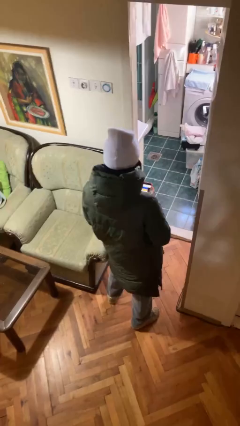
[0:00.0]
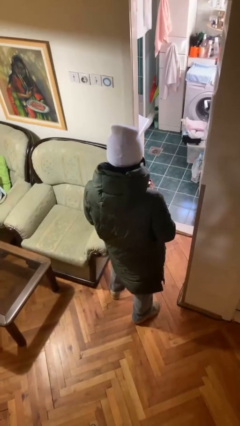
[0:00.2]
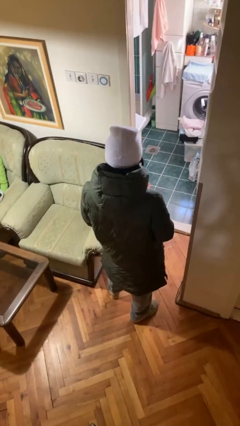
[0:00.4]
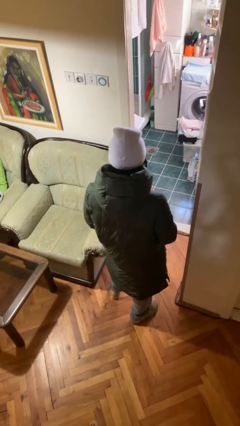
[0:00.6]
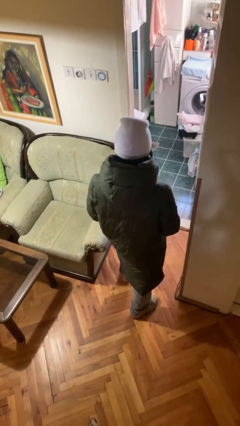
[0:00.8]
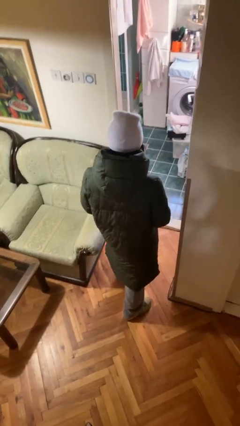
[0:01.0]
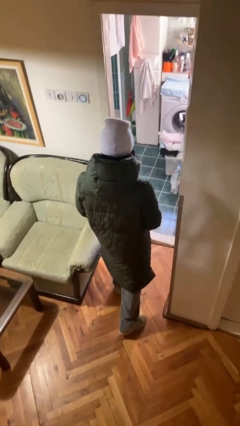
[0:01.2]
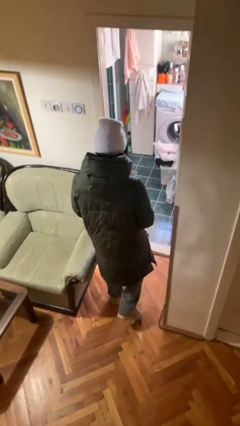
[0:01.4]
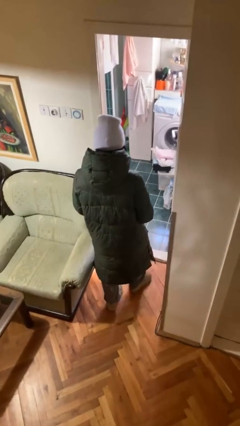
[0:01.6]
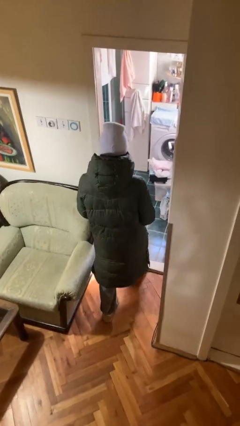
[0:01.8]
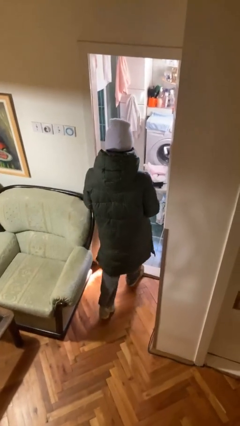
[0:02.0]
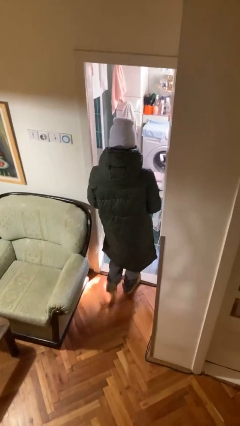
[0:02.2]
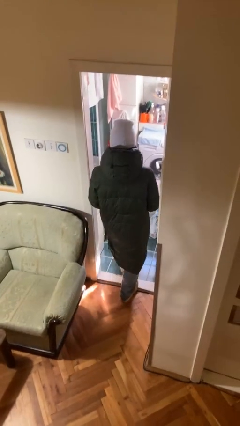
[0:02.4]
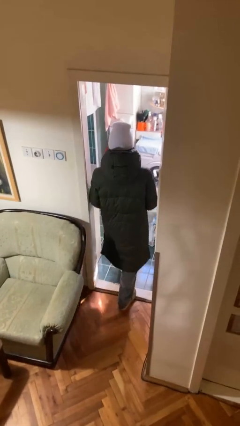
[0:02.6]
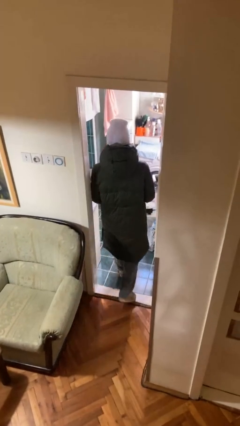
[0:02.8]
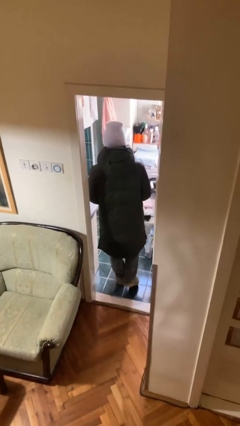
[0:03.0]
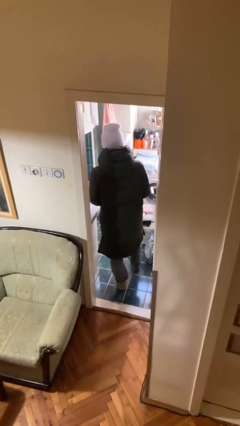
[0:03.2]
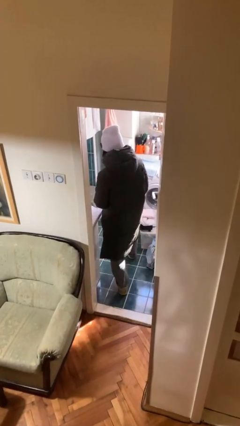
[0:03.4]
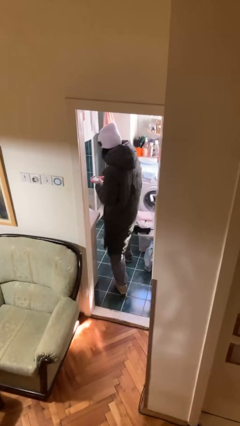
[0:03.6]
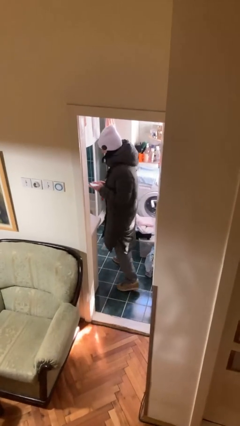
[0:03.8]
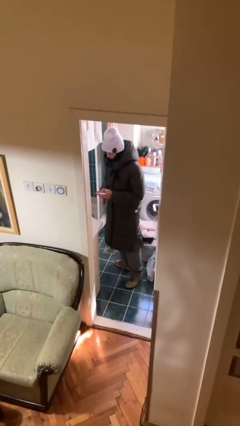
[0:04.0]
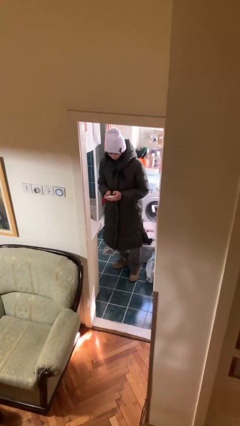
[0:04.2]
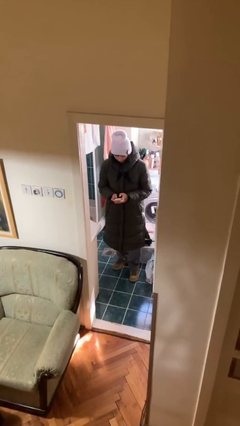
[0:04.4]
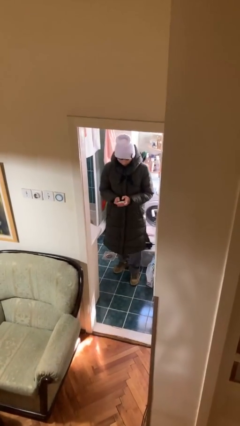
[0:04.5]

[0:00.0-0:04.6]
person exits scene through structure

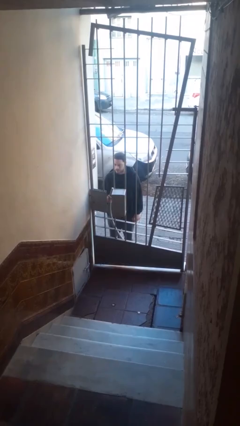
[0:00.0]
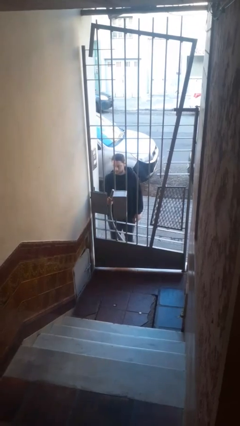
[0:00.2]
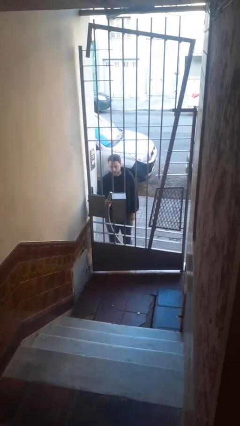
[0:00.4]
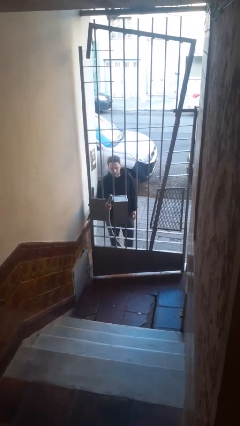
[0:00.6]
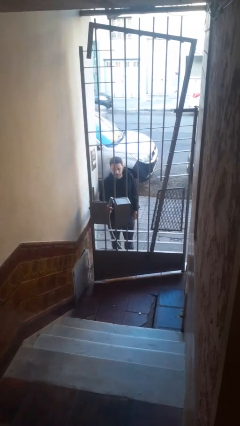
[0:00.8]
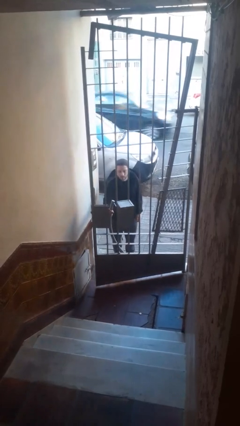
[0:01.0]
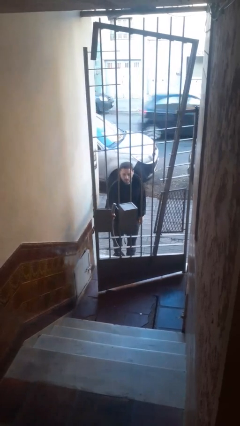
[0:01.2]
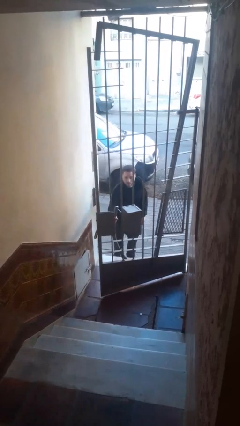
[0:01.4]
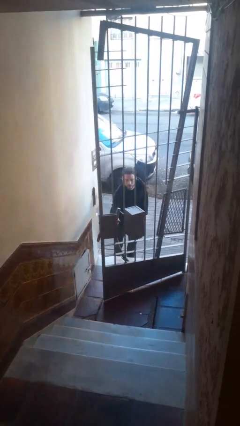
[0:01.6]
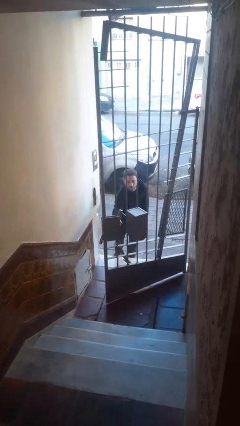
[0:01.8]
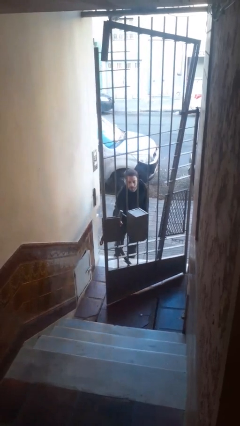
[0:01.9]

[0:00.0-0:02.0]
person opens gate

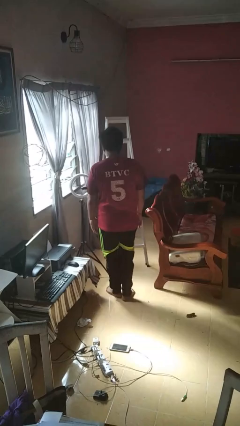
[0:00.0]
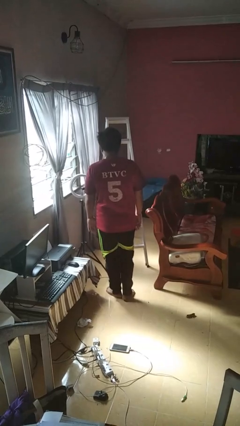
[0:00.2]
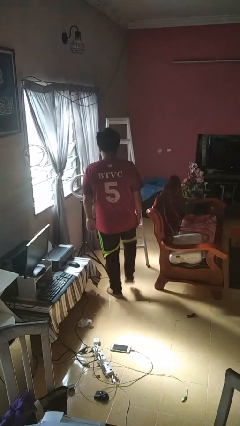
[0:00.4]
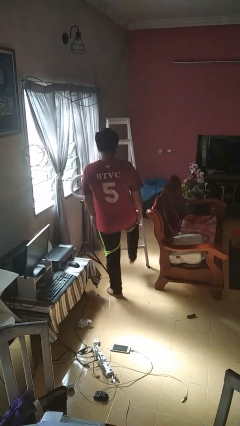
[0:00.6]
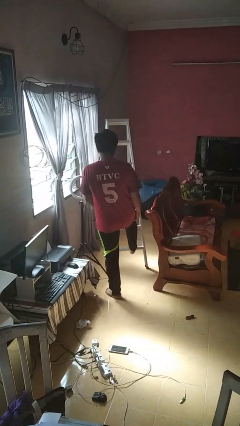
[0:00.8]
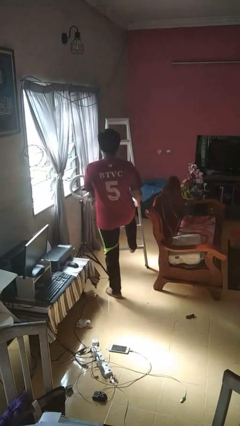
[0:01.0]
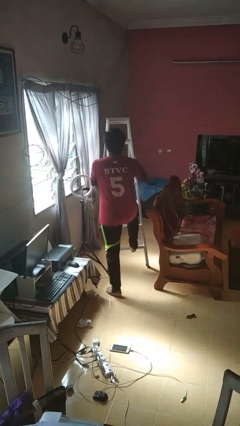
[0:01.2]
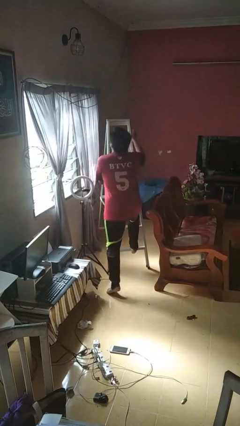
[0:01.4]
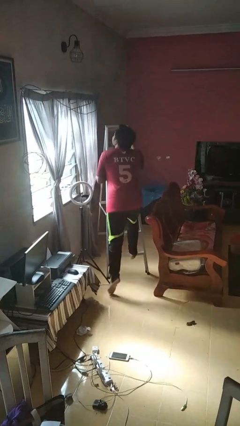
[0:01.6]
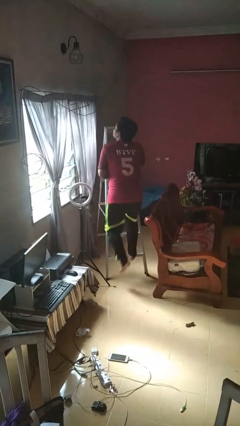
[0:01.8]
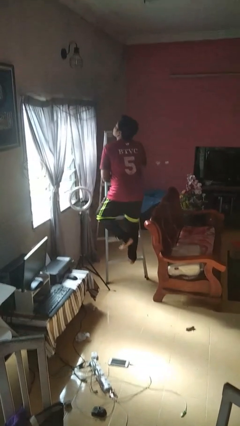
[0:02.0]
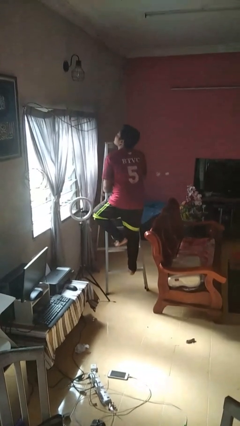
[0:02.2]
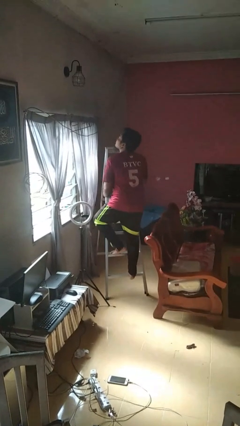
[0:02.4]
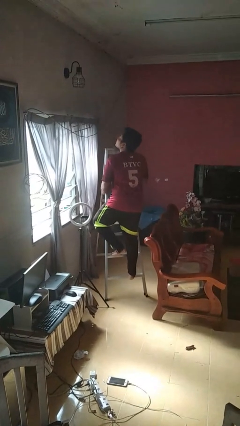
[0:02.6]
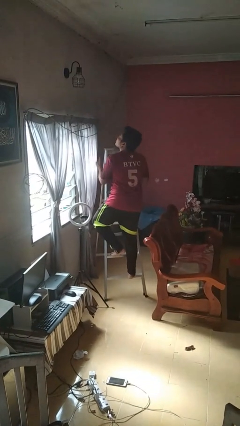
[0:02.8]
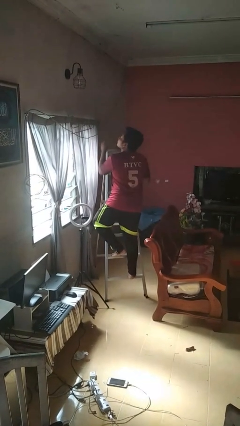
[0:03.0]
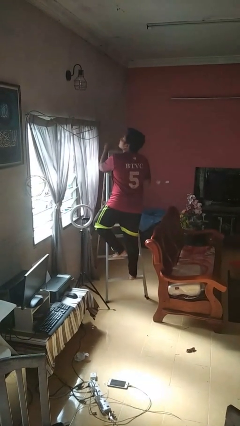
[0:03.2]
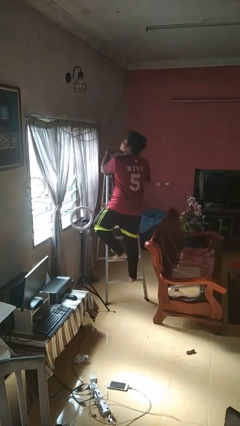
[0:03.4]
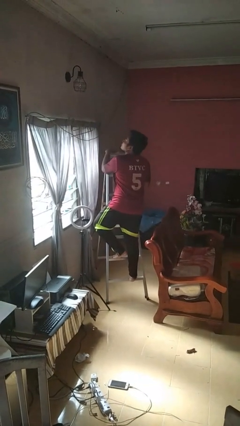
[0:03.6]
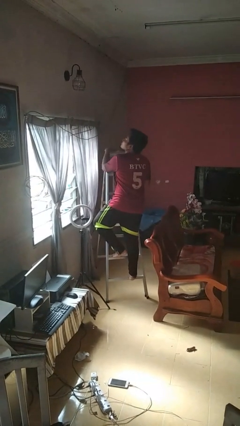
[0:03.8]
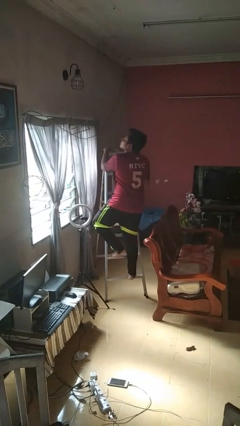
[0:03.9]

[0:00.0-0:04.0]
person climbs up ladder

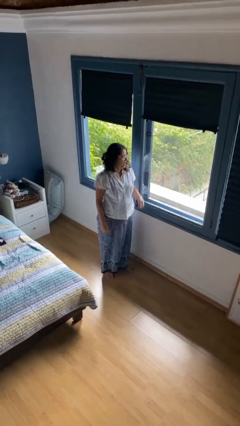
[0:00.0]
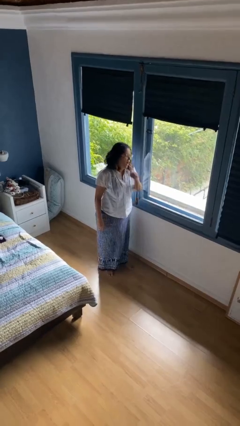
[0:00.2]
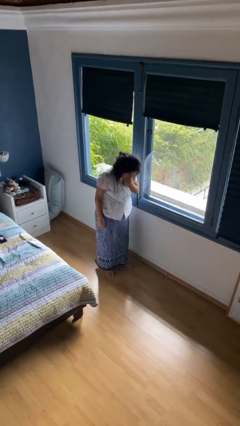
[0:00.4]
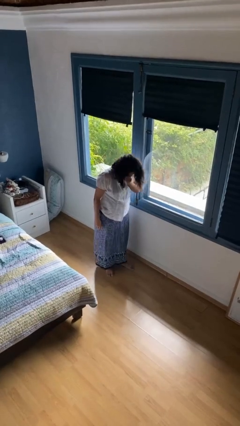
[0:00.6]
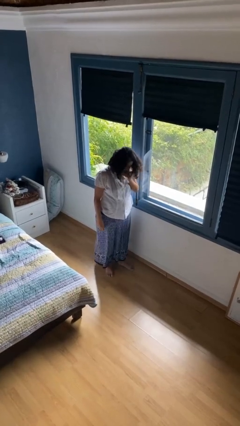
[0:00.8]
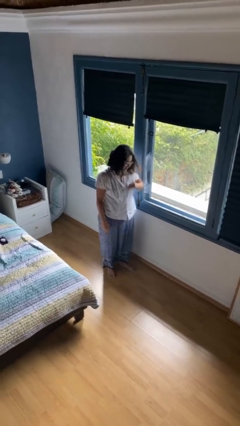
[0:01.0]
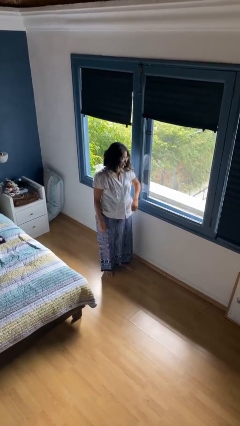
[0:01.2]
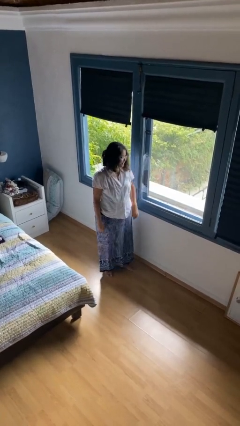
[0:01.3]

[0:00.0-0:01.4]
person sneezes into hand

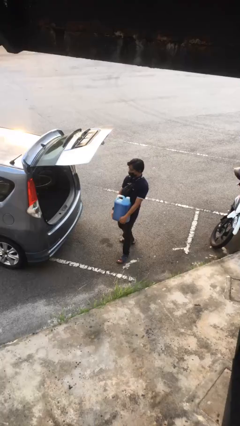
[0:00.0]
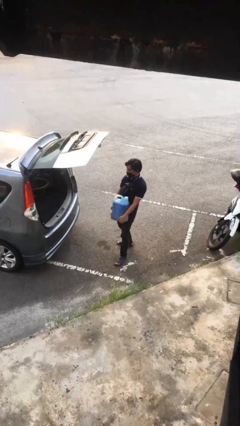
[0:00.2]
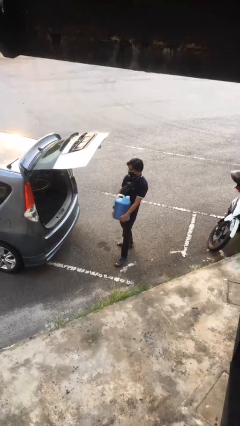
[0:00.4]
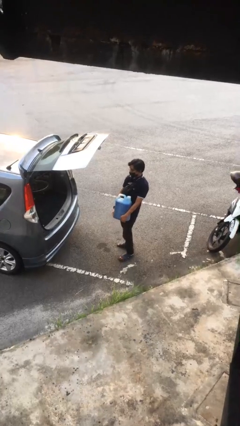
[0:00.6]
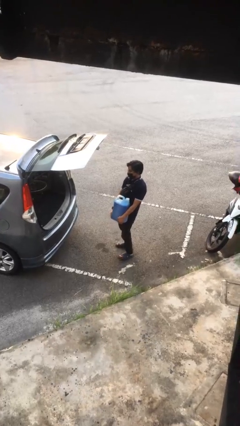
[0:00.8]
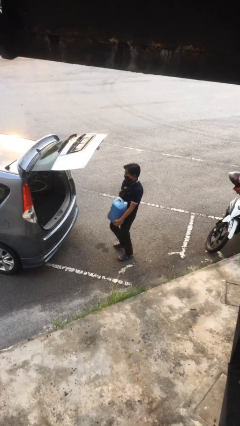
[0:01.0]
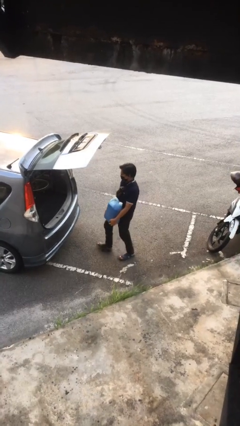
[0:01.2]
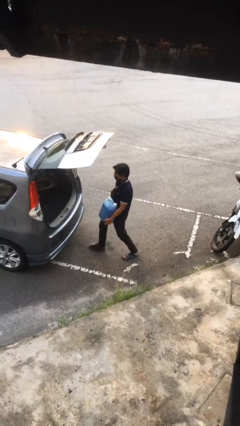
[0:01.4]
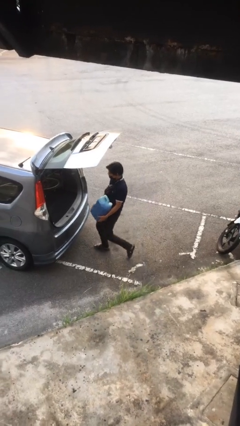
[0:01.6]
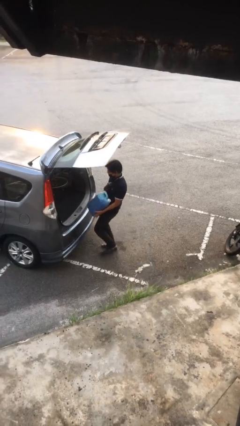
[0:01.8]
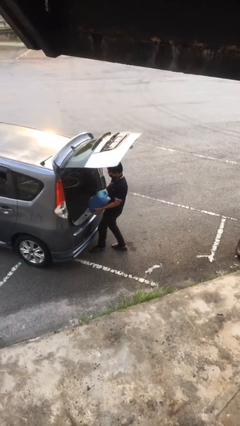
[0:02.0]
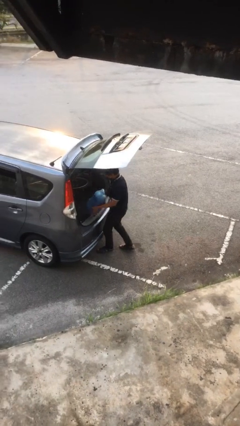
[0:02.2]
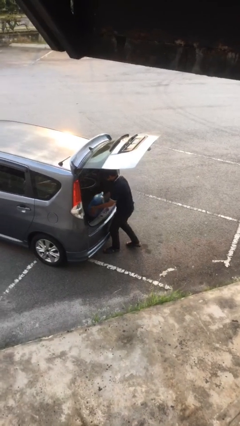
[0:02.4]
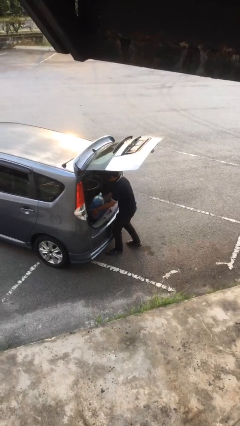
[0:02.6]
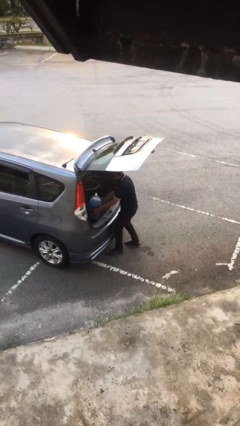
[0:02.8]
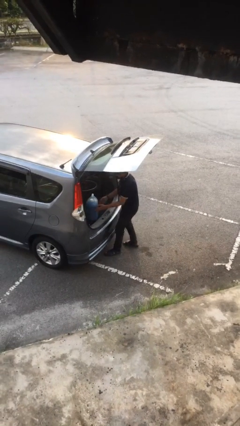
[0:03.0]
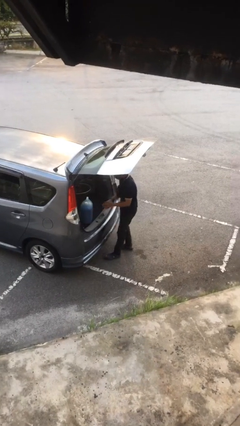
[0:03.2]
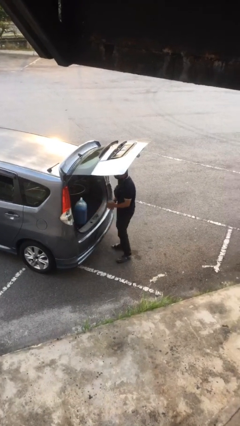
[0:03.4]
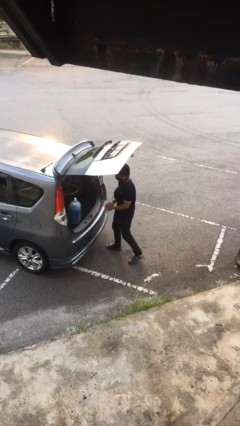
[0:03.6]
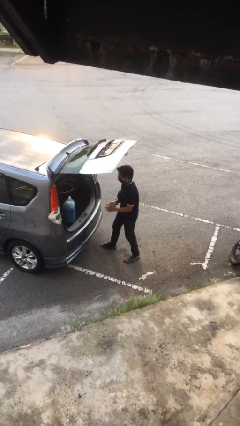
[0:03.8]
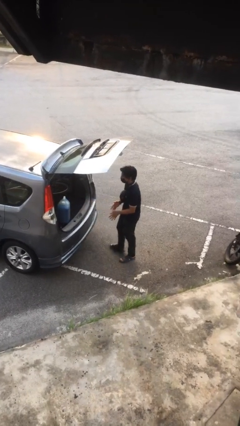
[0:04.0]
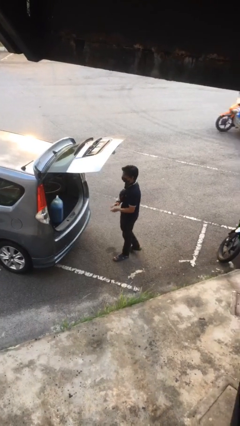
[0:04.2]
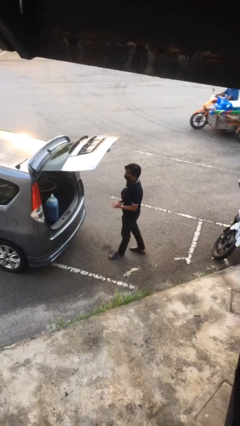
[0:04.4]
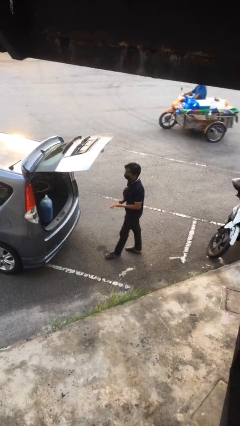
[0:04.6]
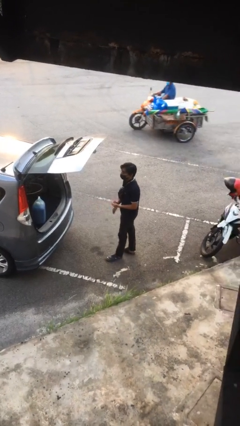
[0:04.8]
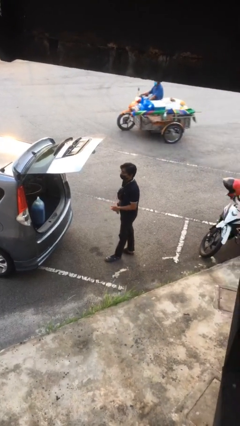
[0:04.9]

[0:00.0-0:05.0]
person loads car

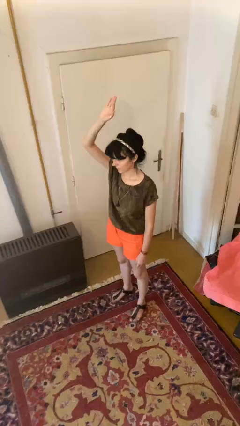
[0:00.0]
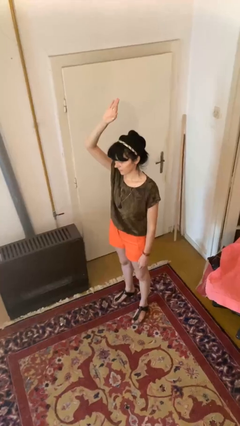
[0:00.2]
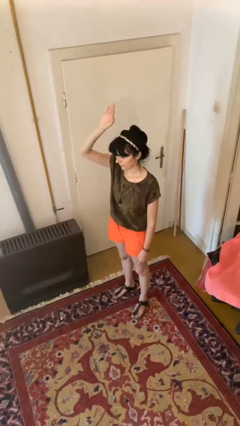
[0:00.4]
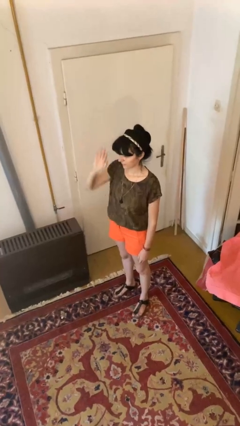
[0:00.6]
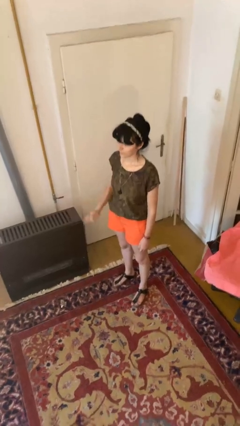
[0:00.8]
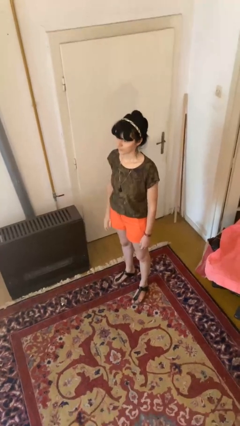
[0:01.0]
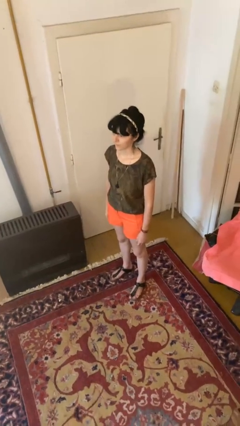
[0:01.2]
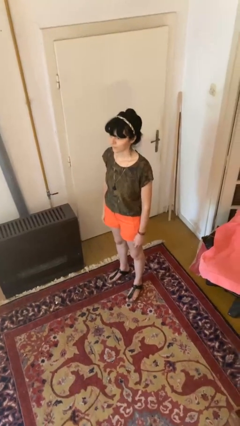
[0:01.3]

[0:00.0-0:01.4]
person gestures lower hand
